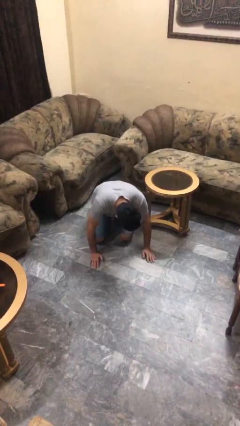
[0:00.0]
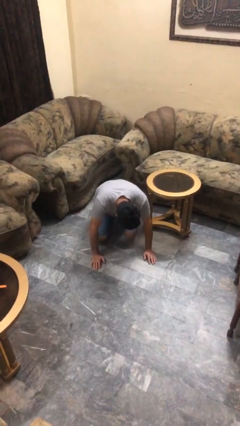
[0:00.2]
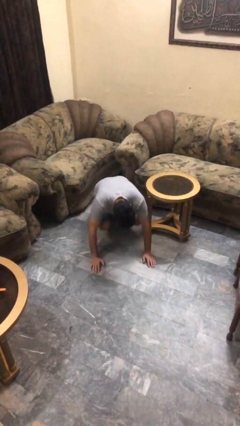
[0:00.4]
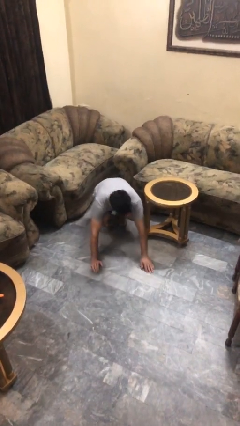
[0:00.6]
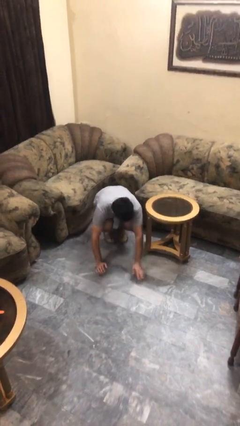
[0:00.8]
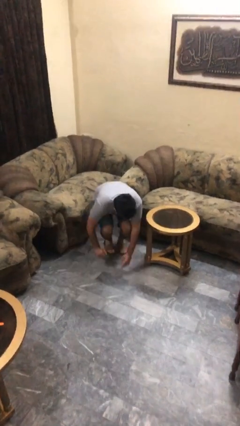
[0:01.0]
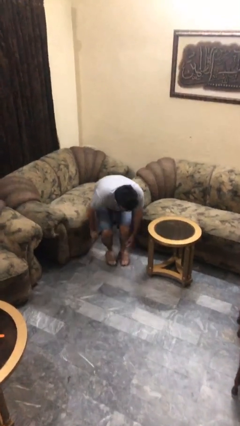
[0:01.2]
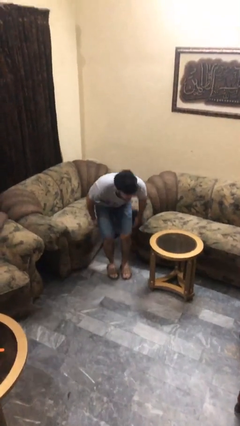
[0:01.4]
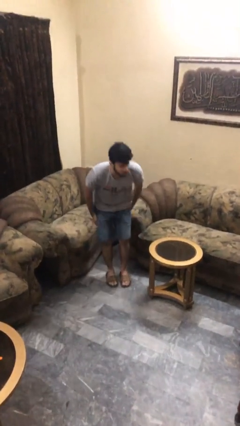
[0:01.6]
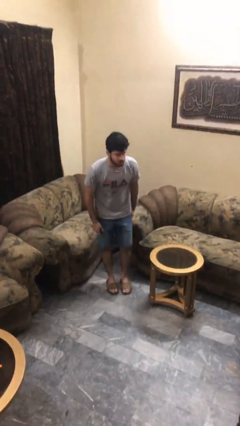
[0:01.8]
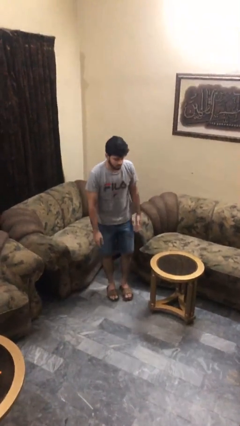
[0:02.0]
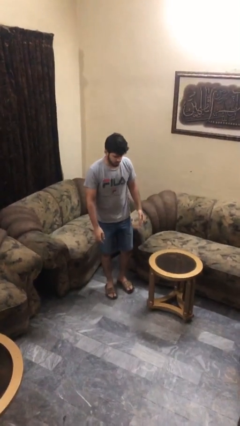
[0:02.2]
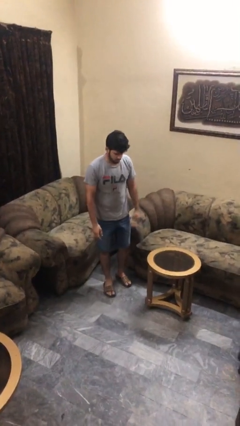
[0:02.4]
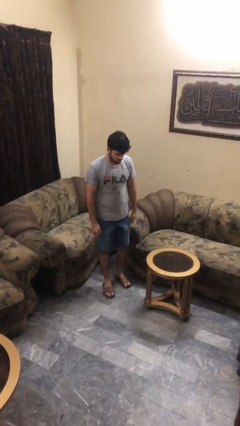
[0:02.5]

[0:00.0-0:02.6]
person stands up from floor

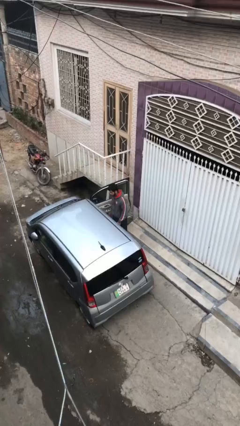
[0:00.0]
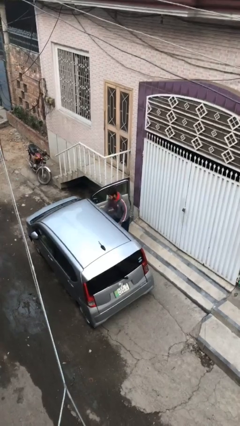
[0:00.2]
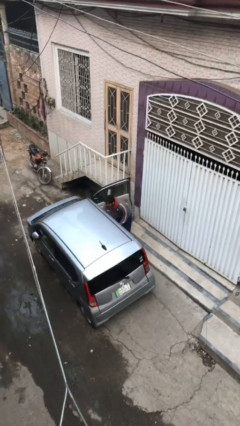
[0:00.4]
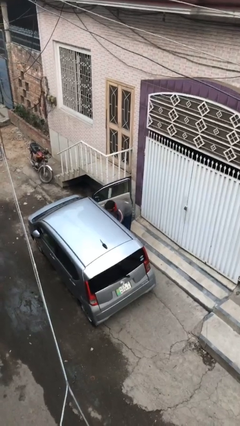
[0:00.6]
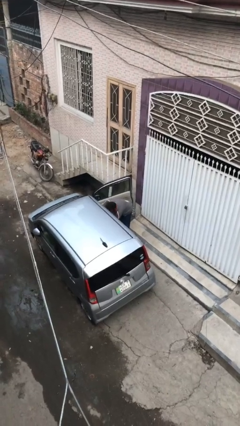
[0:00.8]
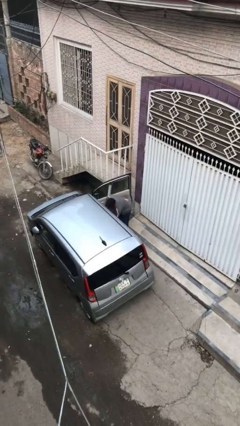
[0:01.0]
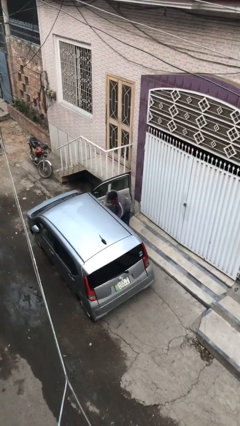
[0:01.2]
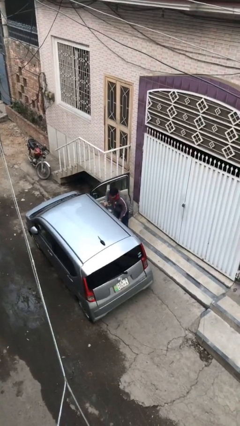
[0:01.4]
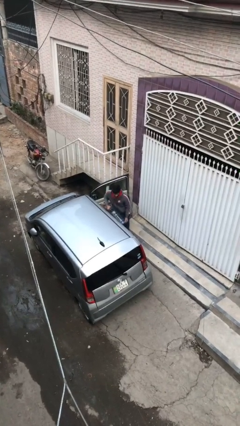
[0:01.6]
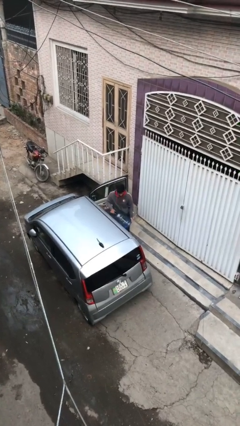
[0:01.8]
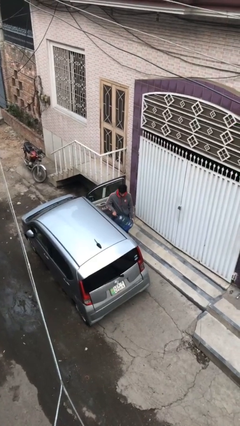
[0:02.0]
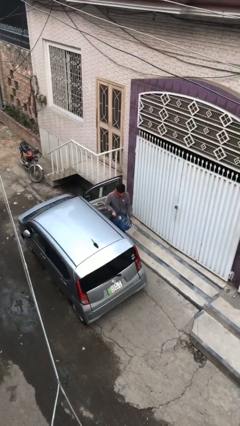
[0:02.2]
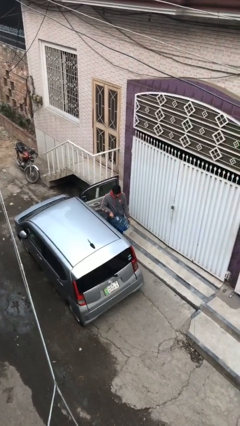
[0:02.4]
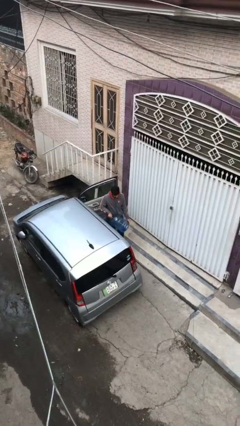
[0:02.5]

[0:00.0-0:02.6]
person unloads car

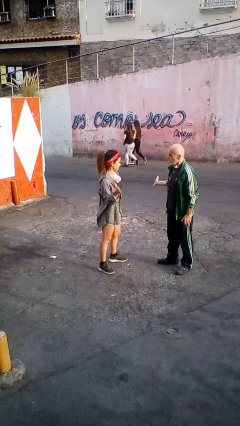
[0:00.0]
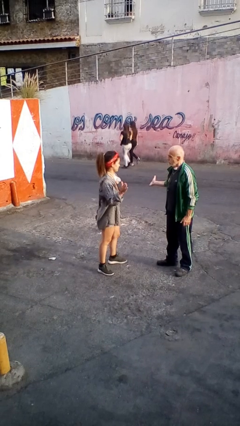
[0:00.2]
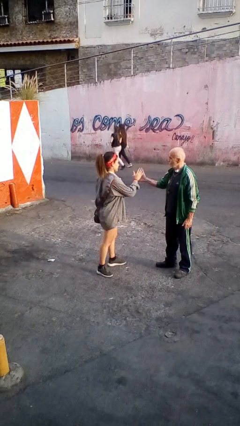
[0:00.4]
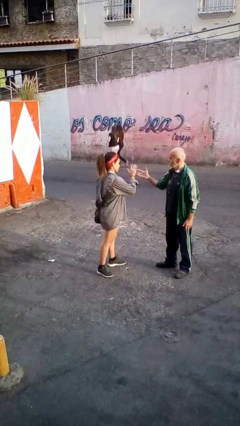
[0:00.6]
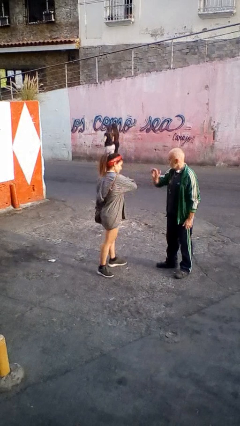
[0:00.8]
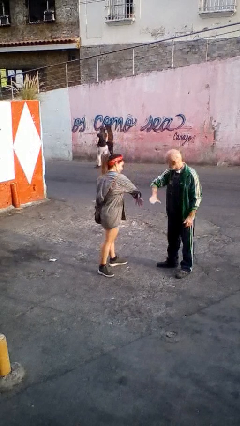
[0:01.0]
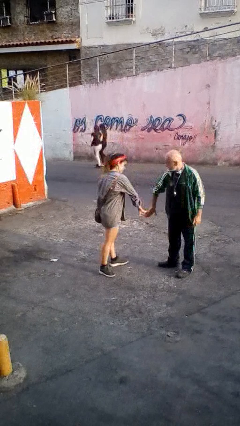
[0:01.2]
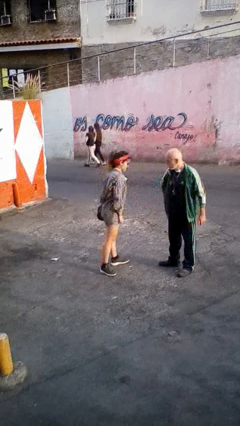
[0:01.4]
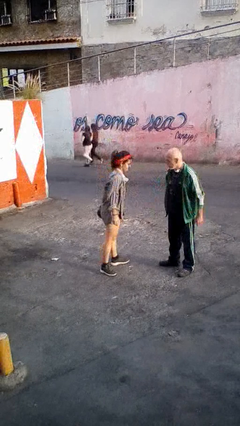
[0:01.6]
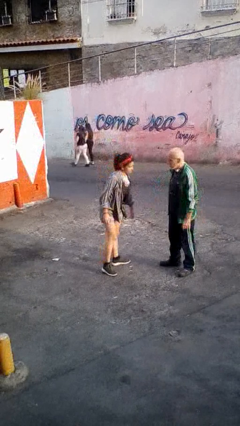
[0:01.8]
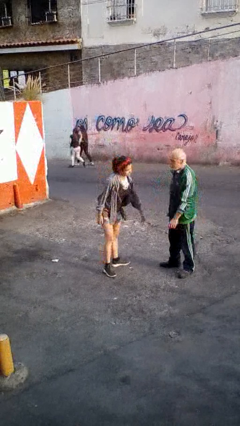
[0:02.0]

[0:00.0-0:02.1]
person highfives hand

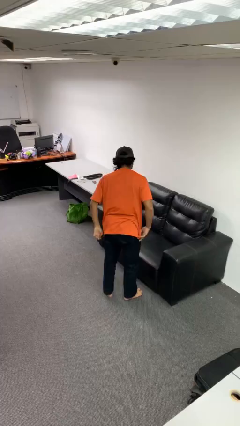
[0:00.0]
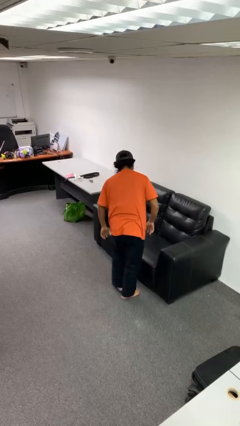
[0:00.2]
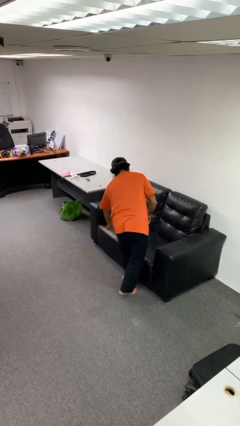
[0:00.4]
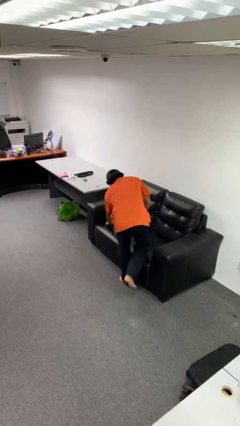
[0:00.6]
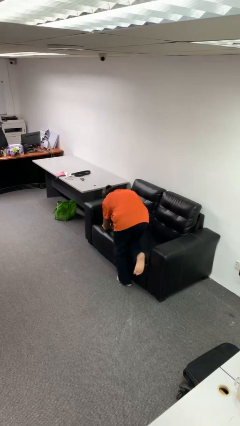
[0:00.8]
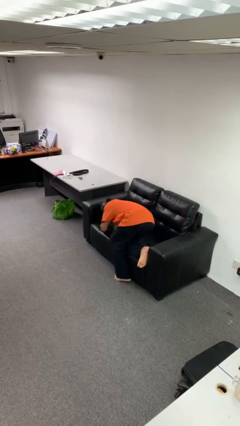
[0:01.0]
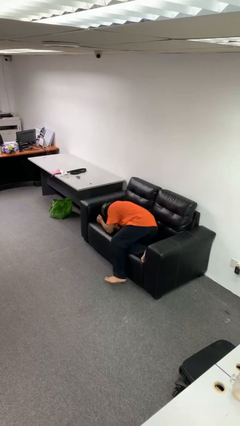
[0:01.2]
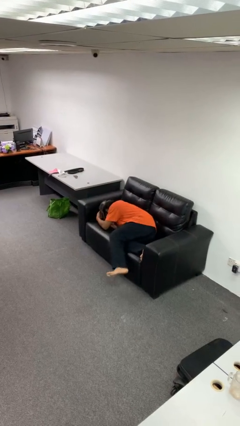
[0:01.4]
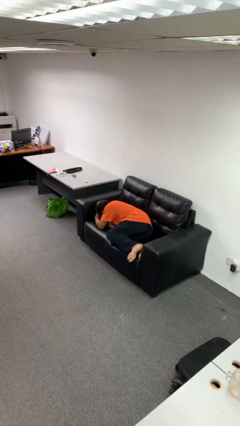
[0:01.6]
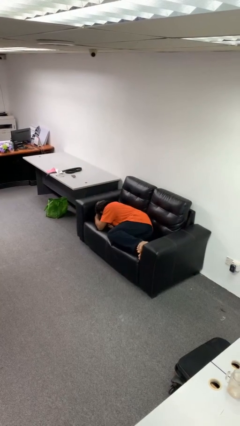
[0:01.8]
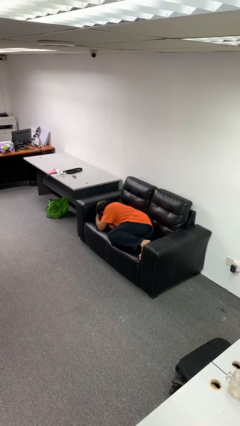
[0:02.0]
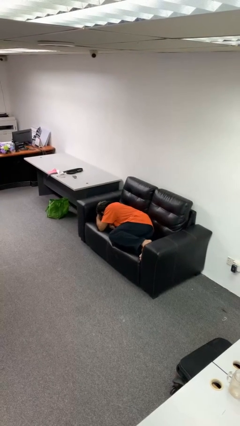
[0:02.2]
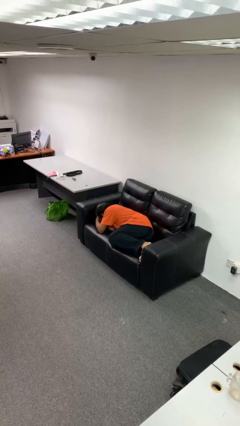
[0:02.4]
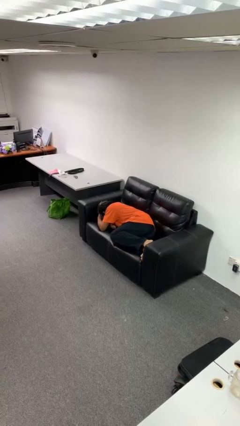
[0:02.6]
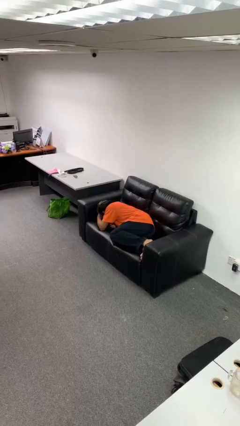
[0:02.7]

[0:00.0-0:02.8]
person lies down on couch

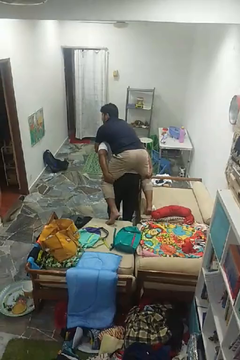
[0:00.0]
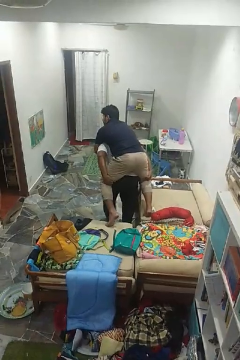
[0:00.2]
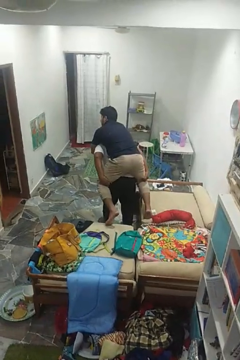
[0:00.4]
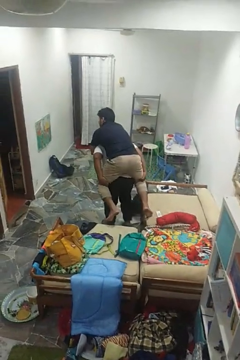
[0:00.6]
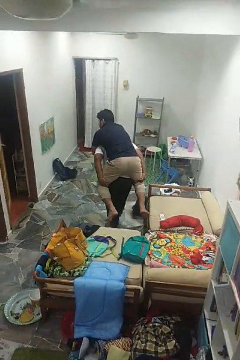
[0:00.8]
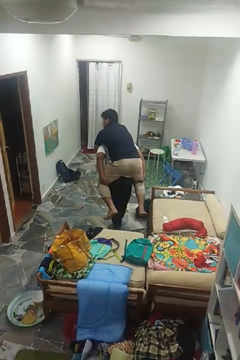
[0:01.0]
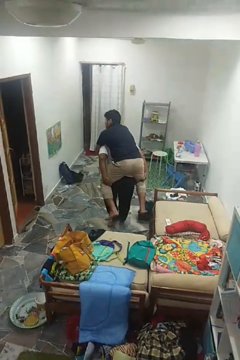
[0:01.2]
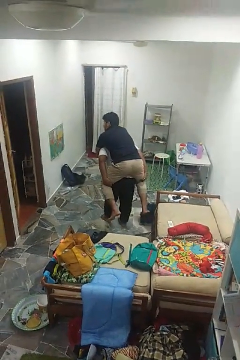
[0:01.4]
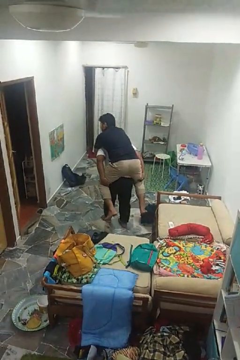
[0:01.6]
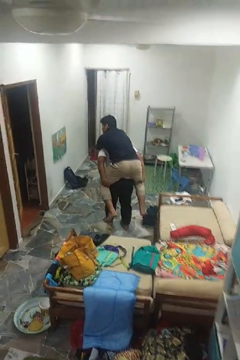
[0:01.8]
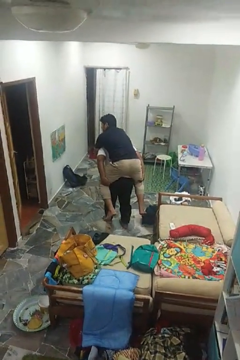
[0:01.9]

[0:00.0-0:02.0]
person carries person on back

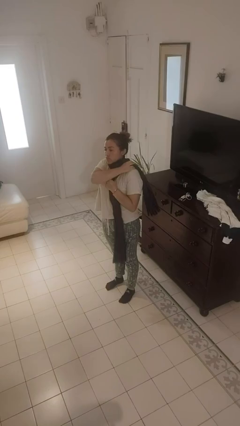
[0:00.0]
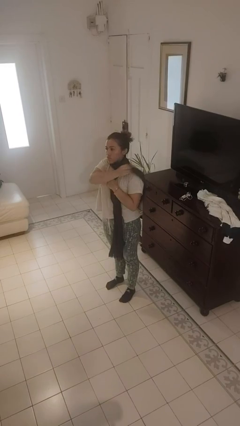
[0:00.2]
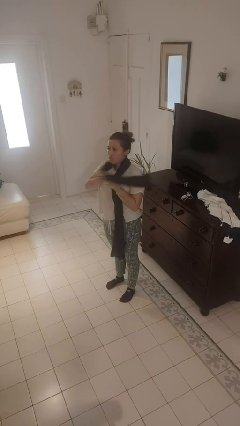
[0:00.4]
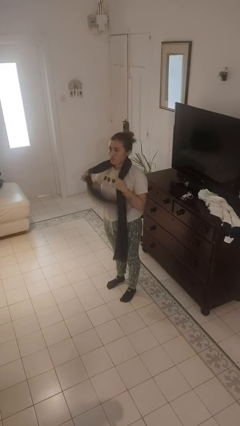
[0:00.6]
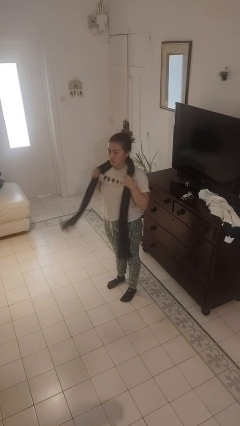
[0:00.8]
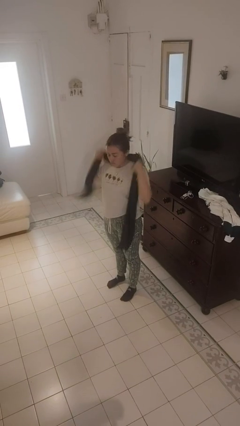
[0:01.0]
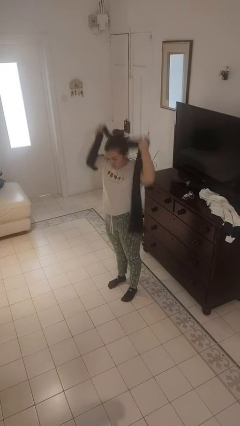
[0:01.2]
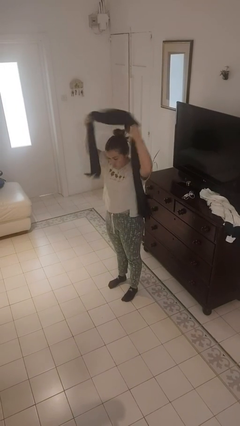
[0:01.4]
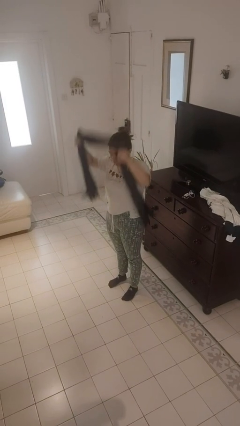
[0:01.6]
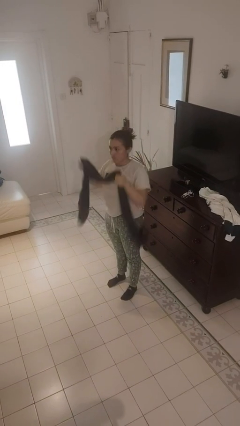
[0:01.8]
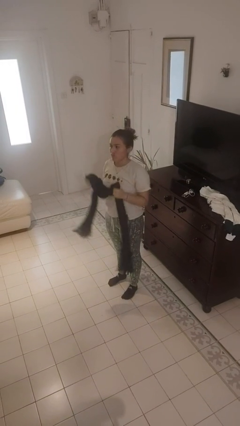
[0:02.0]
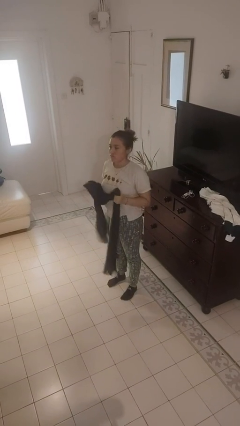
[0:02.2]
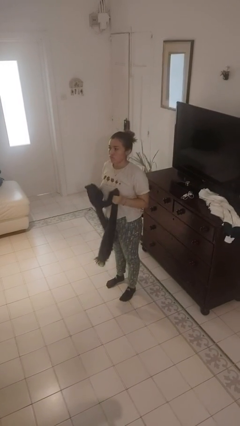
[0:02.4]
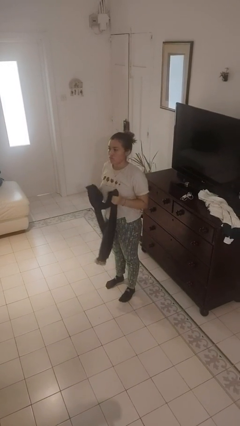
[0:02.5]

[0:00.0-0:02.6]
person takes off scarf

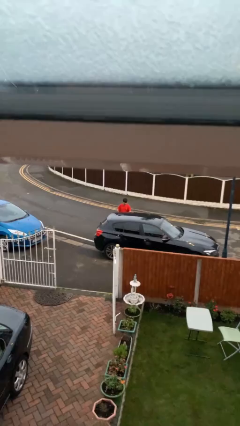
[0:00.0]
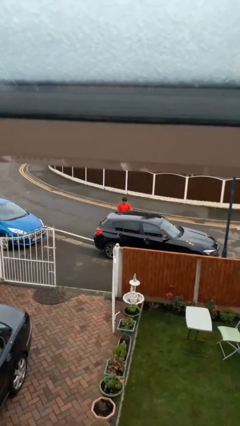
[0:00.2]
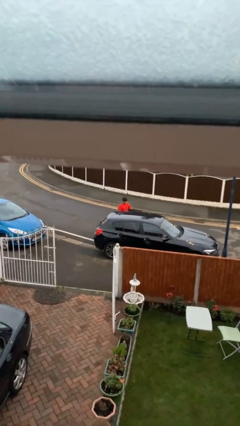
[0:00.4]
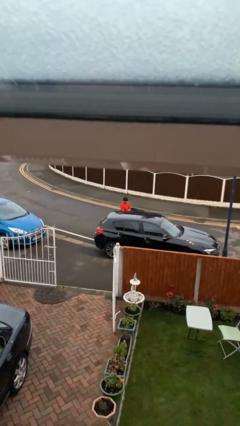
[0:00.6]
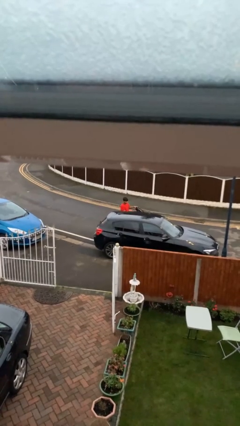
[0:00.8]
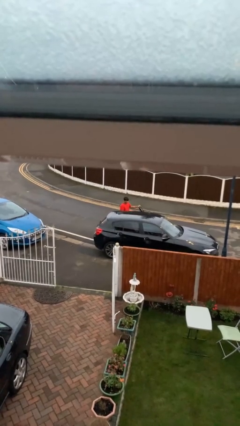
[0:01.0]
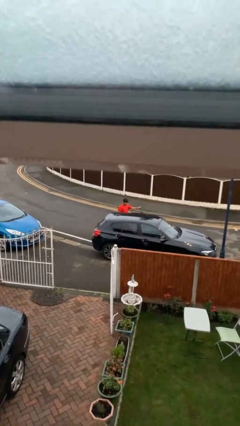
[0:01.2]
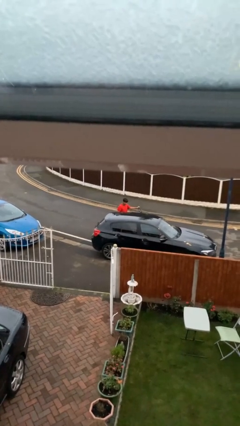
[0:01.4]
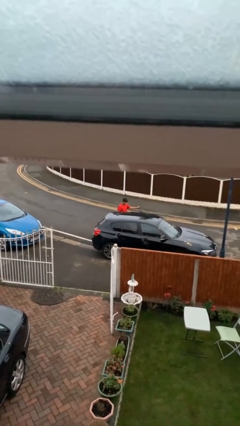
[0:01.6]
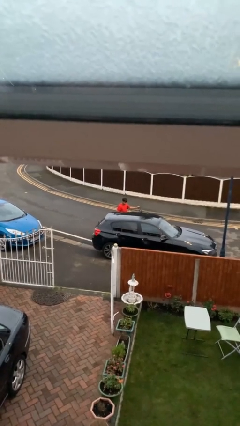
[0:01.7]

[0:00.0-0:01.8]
person opens car door

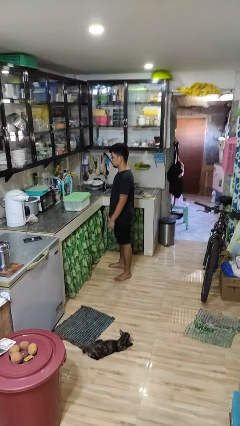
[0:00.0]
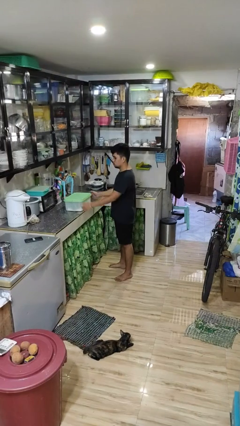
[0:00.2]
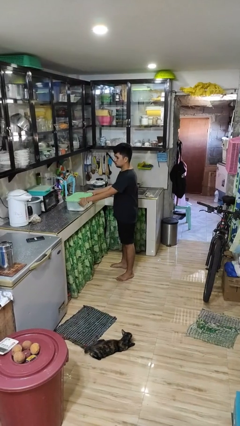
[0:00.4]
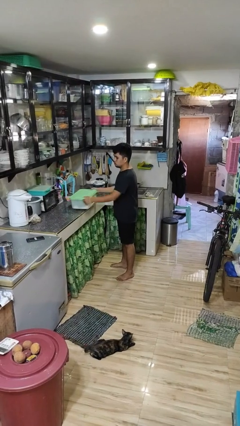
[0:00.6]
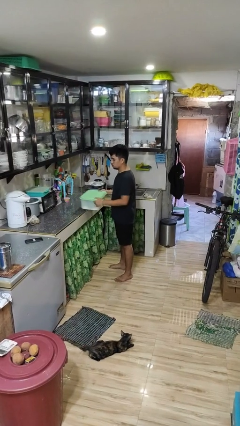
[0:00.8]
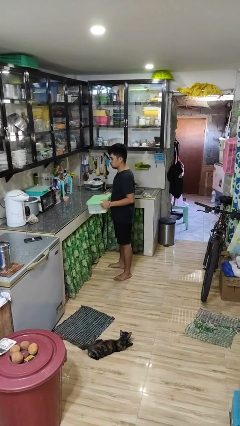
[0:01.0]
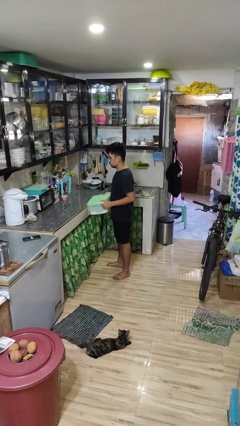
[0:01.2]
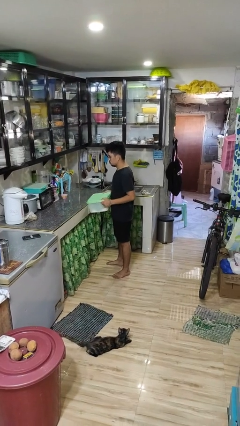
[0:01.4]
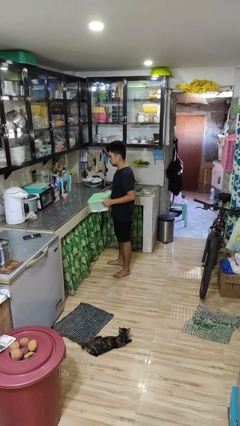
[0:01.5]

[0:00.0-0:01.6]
person picks up object from countertop
